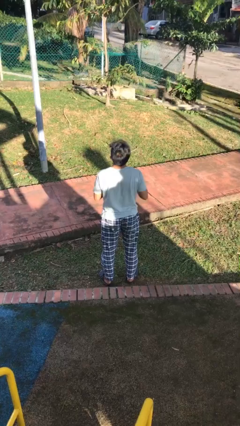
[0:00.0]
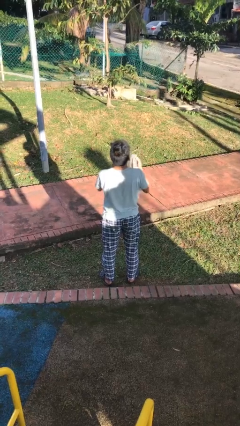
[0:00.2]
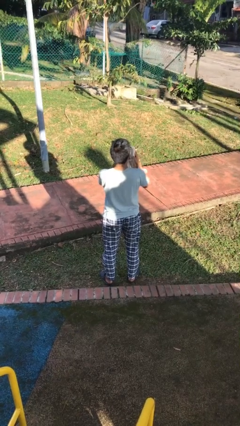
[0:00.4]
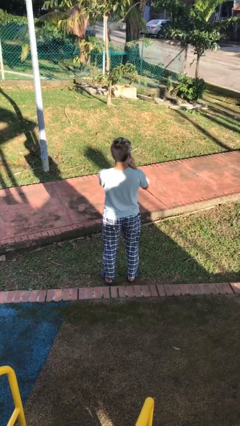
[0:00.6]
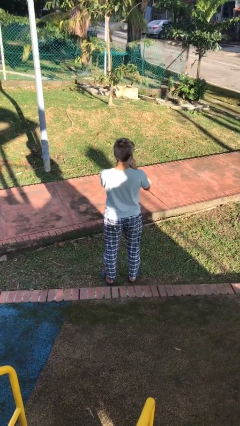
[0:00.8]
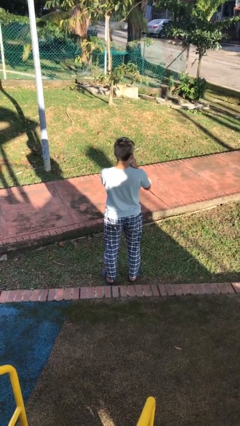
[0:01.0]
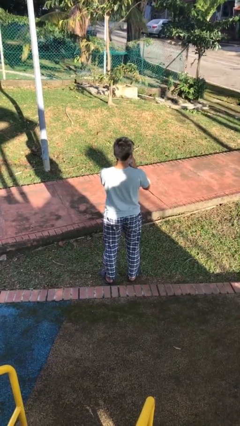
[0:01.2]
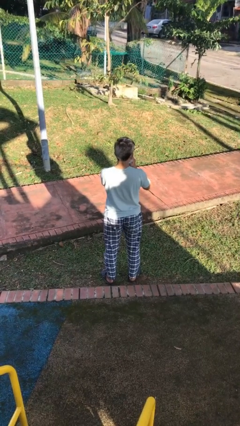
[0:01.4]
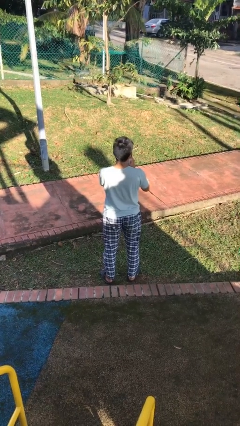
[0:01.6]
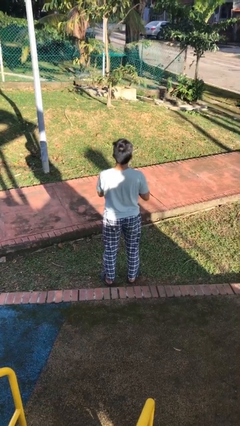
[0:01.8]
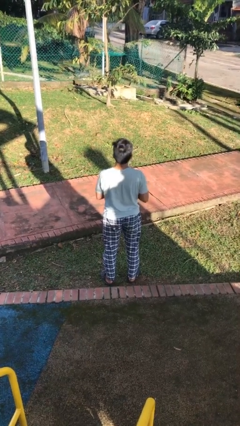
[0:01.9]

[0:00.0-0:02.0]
person blows nose

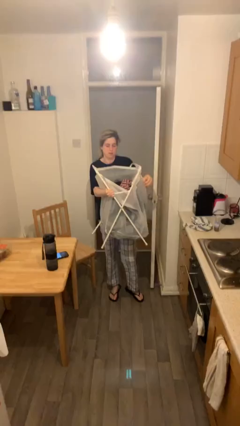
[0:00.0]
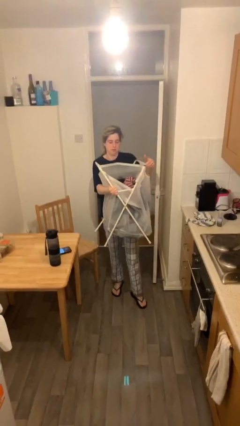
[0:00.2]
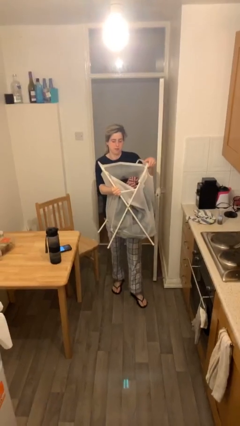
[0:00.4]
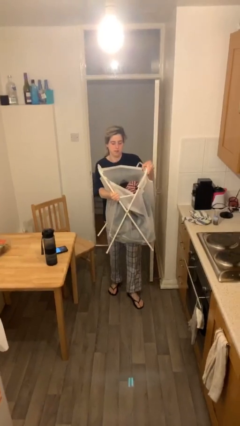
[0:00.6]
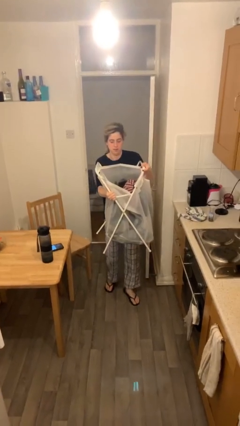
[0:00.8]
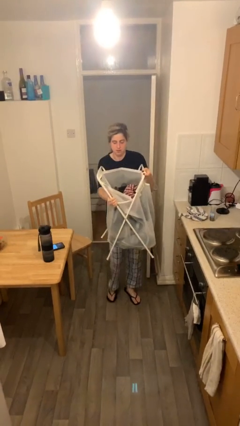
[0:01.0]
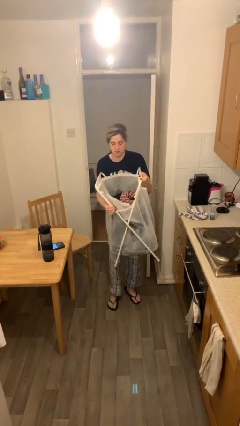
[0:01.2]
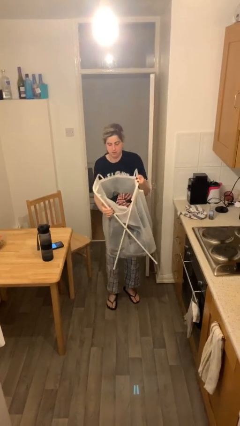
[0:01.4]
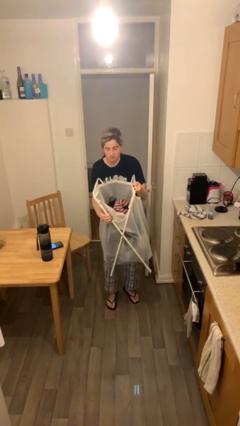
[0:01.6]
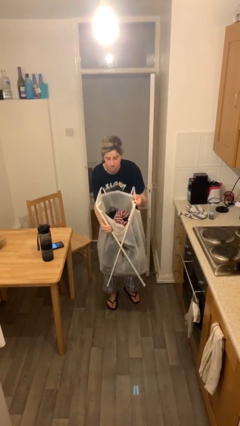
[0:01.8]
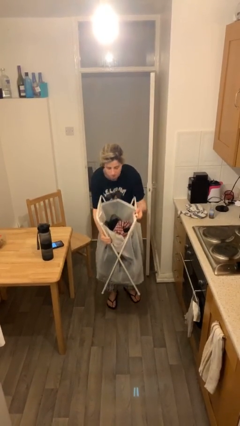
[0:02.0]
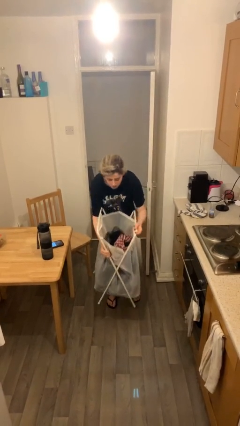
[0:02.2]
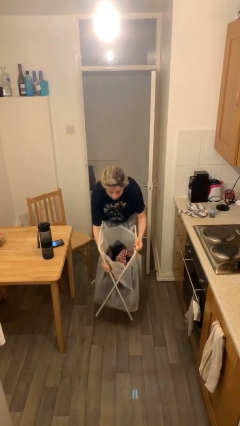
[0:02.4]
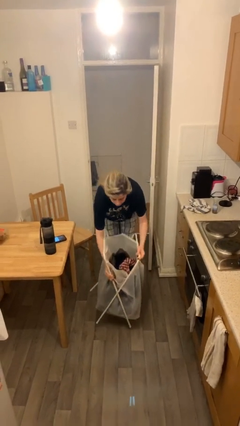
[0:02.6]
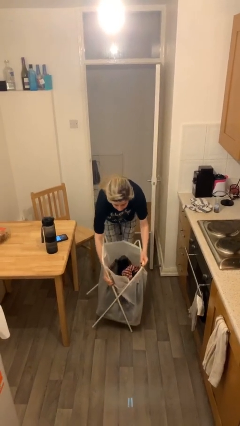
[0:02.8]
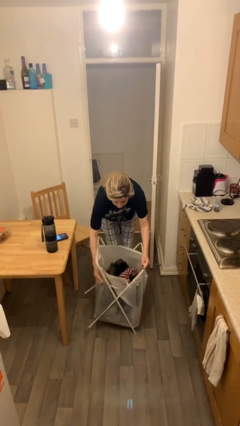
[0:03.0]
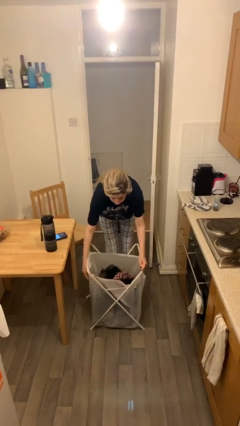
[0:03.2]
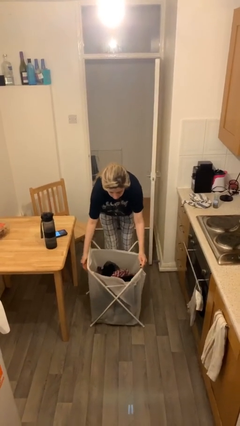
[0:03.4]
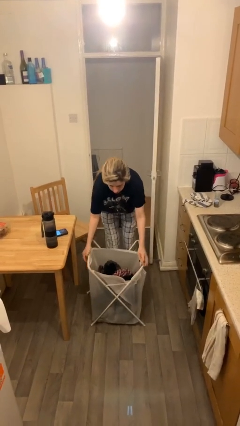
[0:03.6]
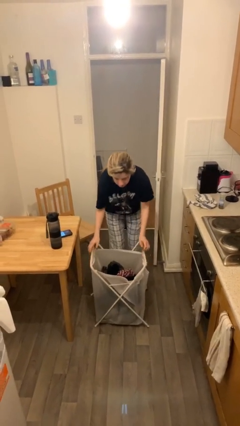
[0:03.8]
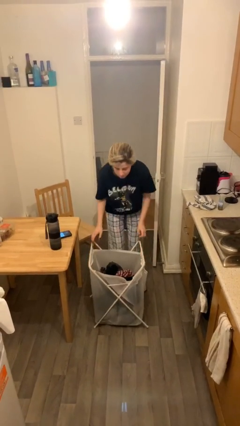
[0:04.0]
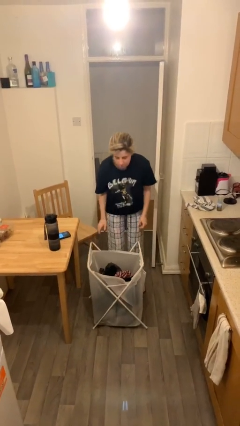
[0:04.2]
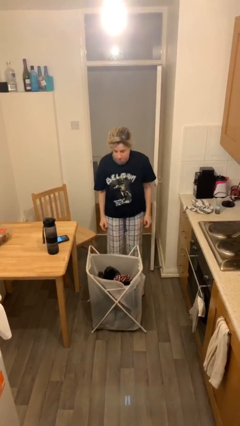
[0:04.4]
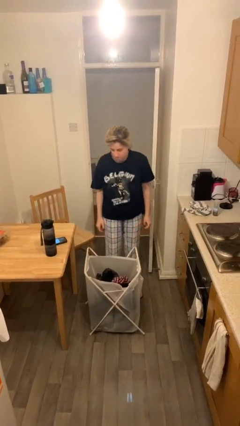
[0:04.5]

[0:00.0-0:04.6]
person puts down object on floor

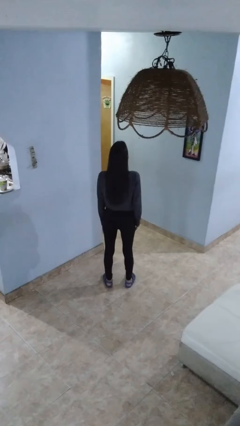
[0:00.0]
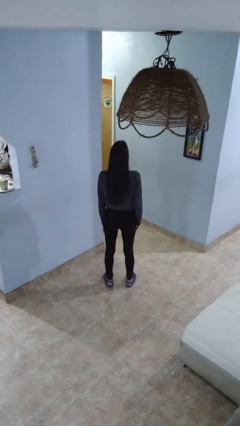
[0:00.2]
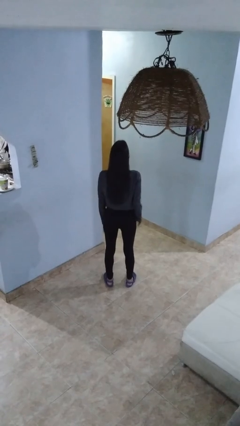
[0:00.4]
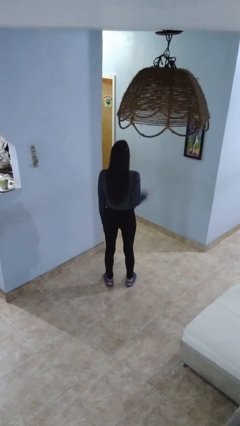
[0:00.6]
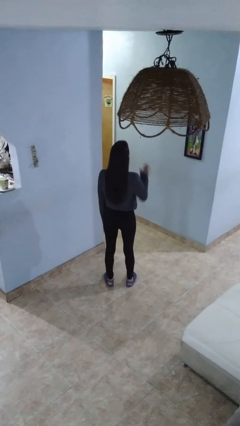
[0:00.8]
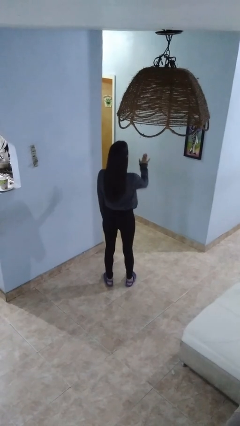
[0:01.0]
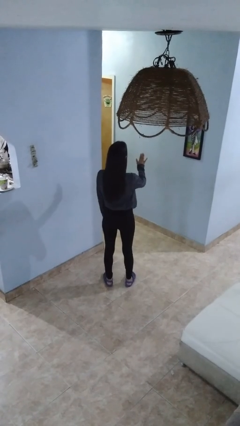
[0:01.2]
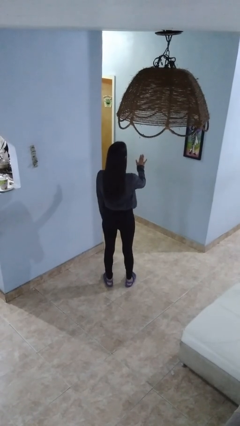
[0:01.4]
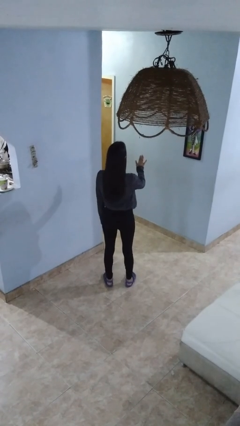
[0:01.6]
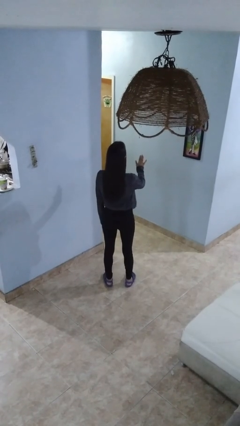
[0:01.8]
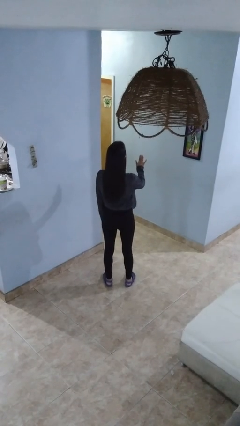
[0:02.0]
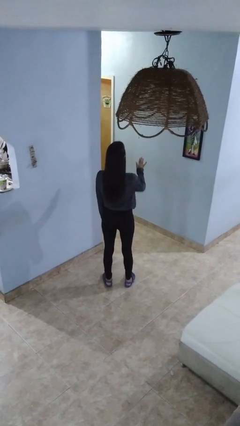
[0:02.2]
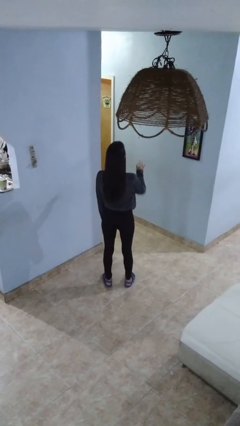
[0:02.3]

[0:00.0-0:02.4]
person gestures stop

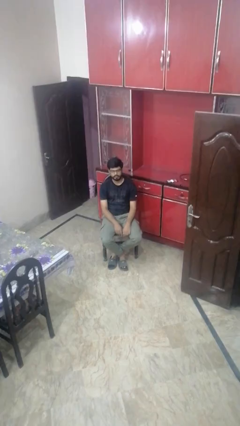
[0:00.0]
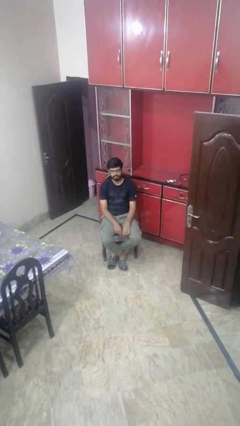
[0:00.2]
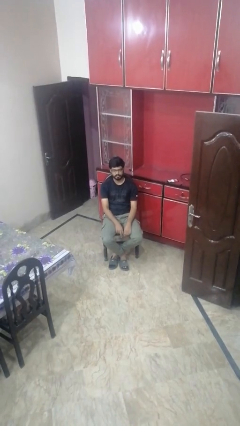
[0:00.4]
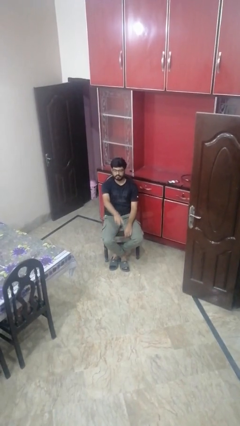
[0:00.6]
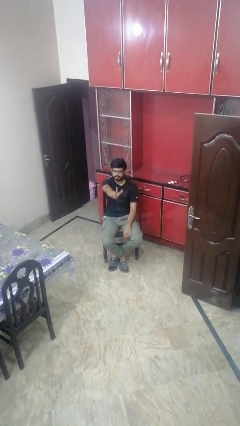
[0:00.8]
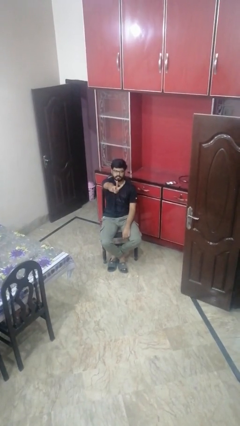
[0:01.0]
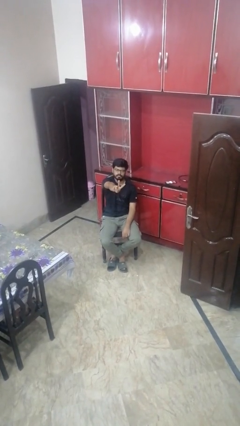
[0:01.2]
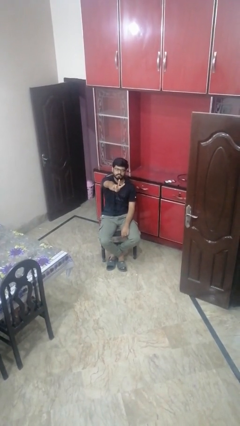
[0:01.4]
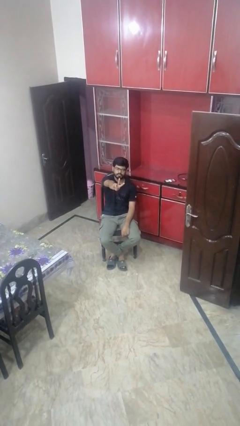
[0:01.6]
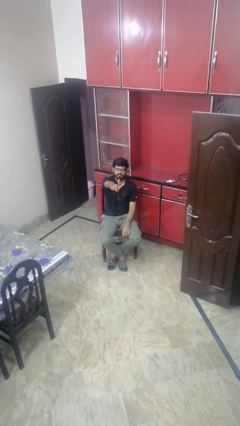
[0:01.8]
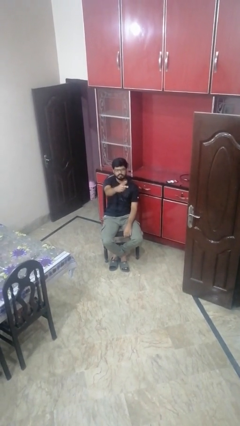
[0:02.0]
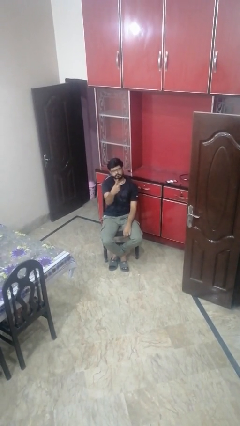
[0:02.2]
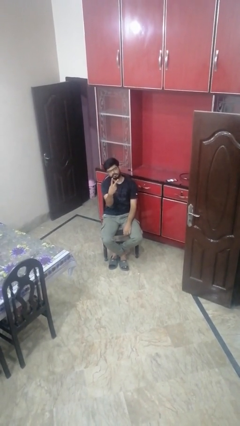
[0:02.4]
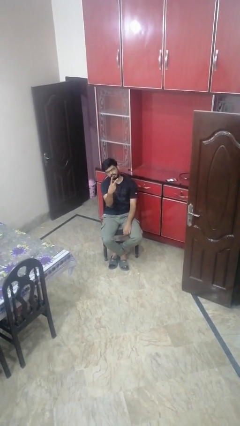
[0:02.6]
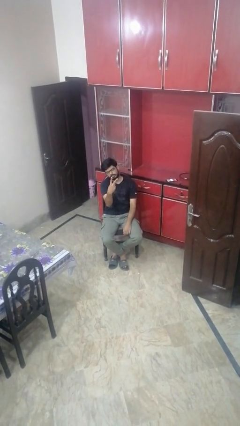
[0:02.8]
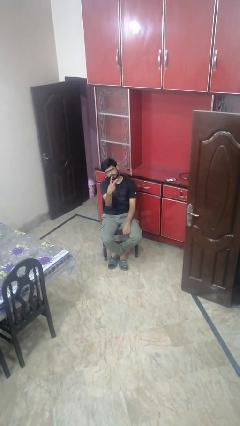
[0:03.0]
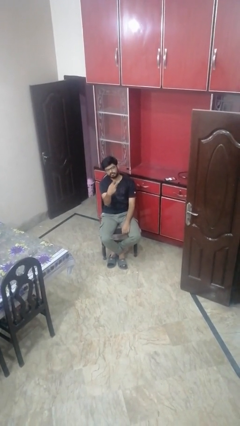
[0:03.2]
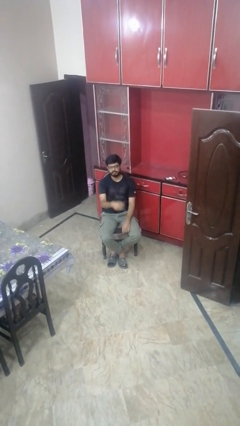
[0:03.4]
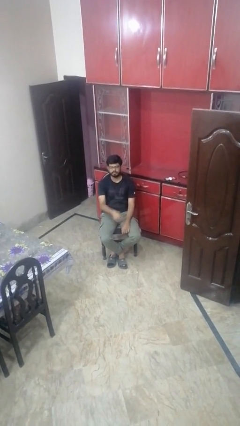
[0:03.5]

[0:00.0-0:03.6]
person gestures peace

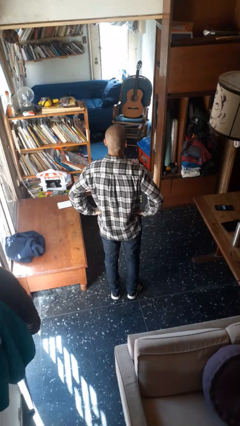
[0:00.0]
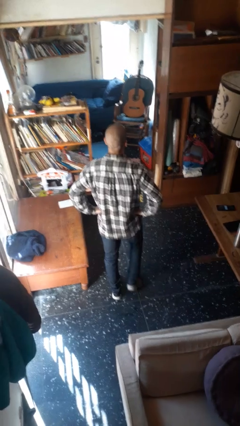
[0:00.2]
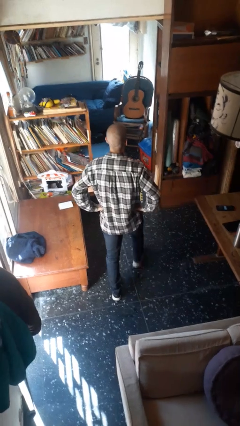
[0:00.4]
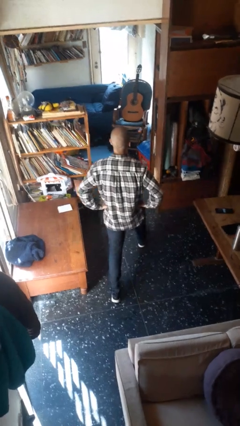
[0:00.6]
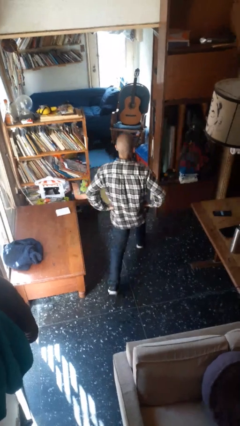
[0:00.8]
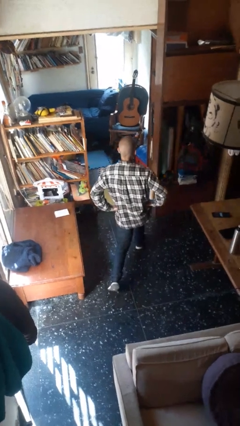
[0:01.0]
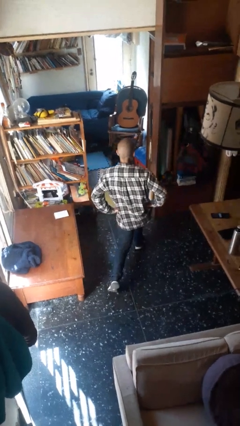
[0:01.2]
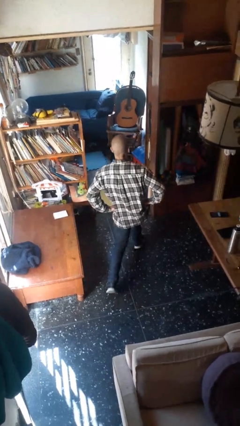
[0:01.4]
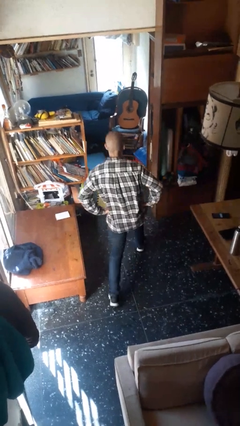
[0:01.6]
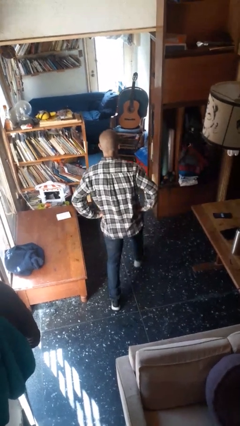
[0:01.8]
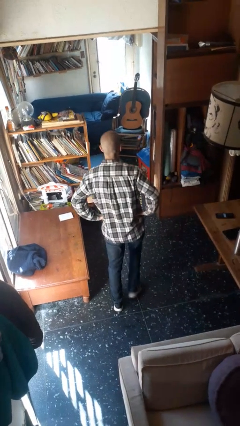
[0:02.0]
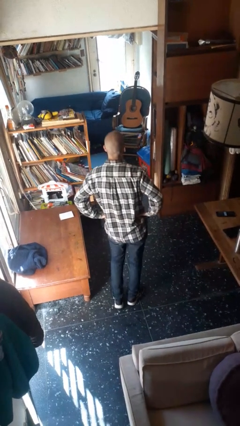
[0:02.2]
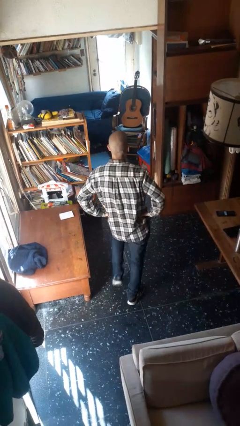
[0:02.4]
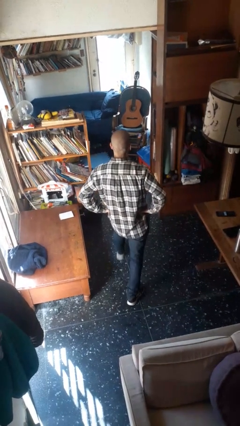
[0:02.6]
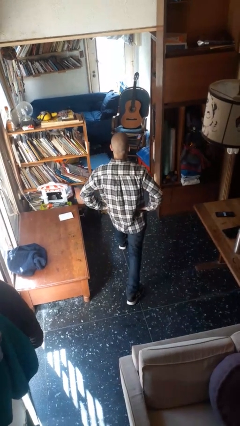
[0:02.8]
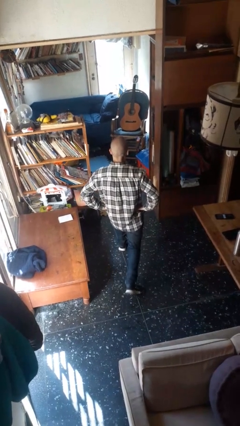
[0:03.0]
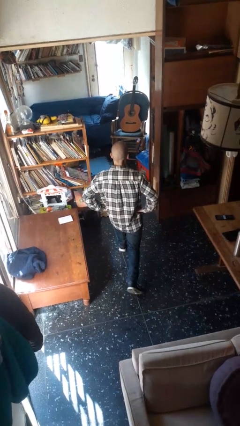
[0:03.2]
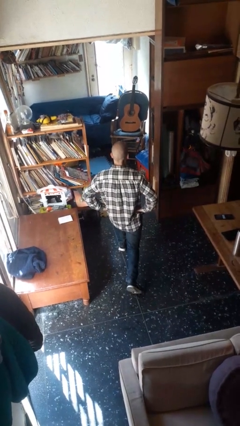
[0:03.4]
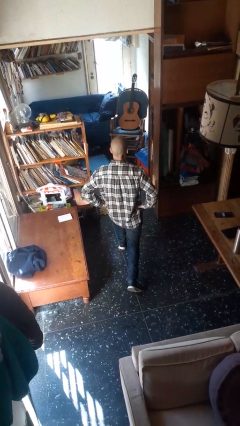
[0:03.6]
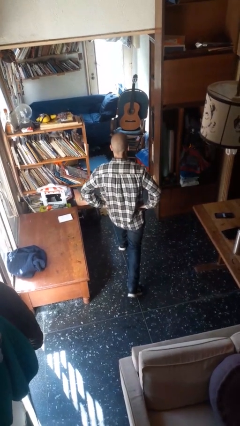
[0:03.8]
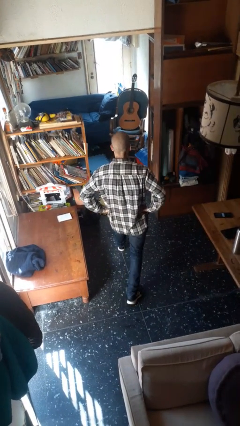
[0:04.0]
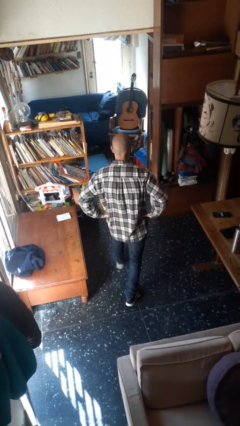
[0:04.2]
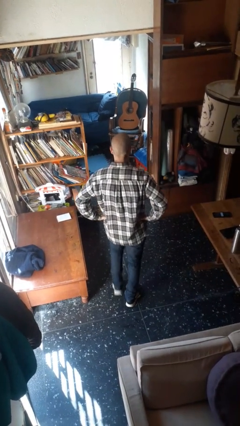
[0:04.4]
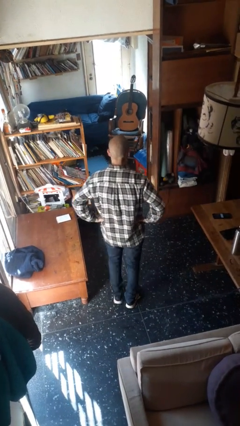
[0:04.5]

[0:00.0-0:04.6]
person exercises with lunges

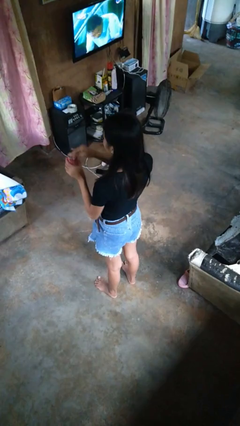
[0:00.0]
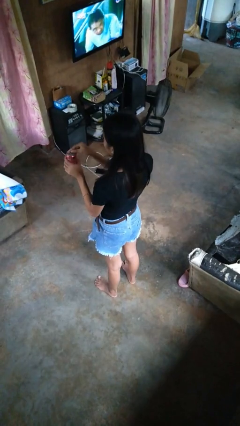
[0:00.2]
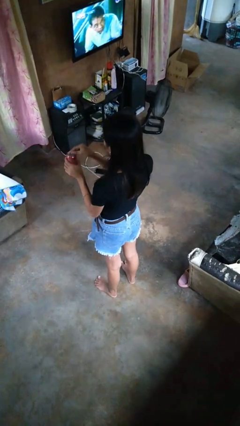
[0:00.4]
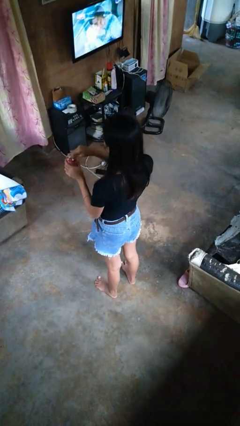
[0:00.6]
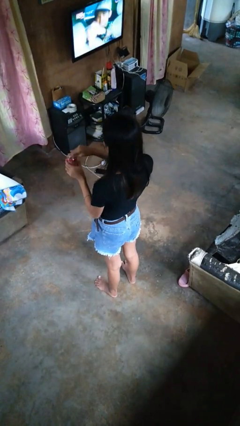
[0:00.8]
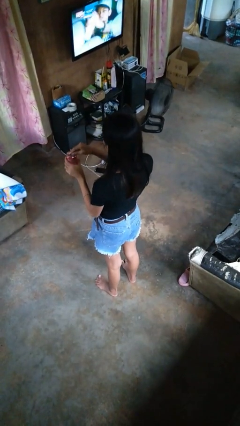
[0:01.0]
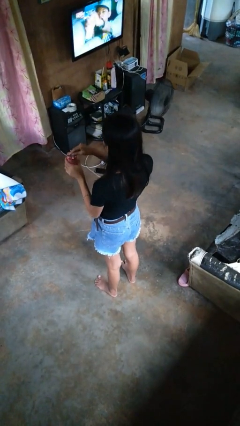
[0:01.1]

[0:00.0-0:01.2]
person opens beverage can
